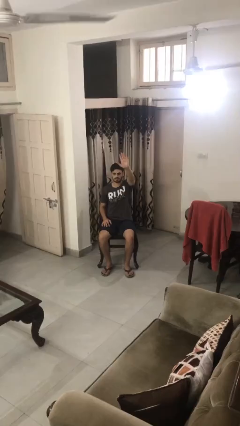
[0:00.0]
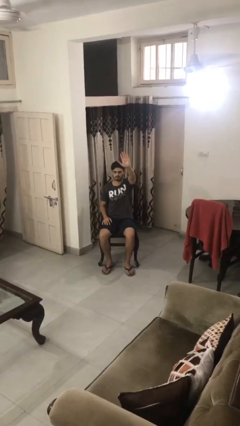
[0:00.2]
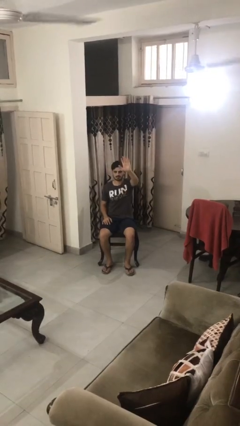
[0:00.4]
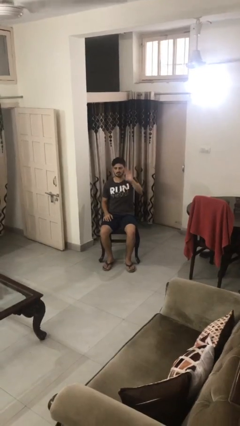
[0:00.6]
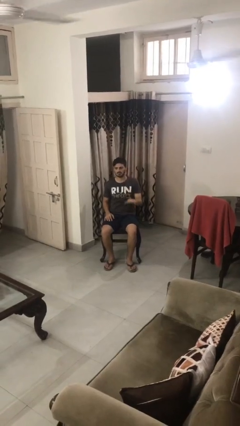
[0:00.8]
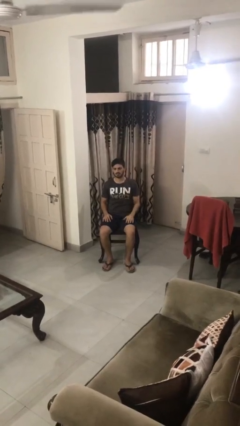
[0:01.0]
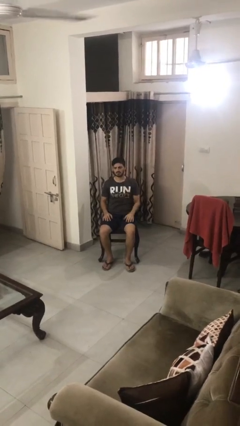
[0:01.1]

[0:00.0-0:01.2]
person gestures lower hand

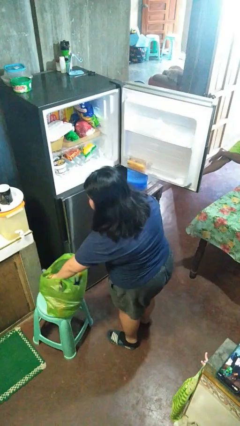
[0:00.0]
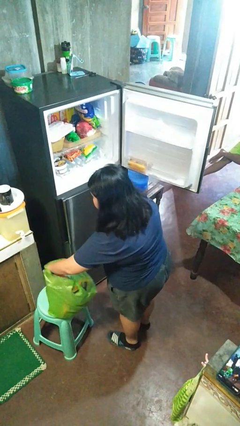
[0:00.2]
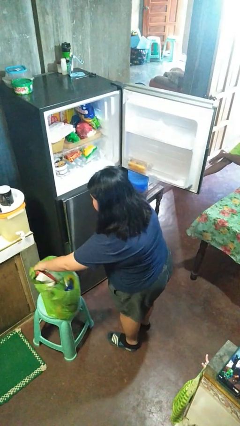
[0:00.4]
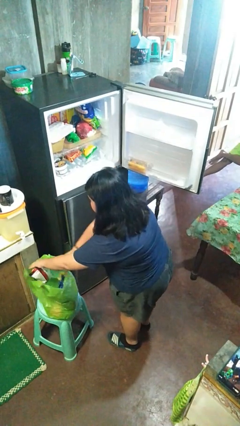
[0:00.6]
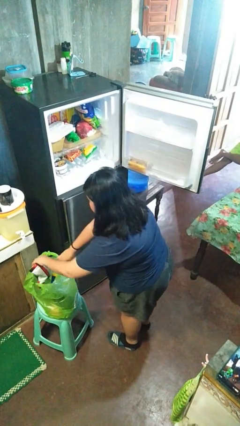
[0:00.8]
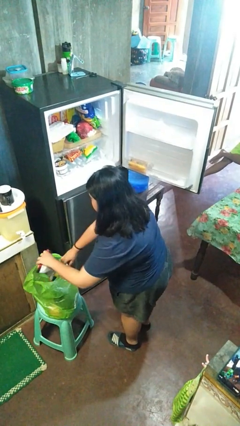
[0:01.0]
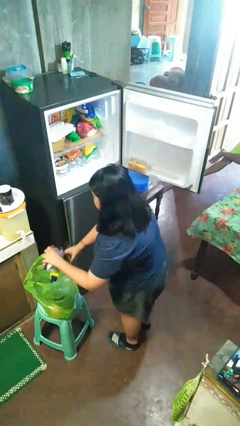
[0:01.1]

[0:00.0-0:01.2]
person loads groceries into refrigerator

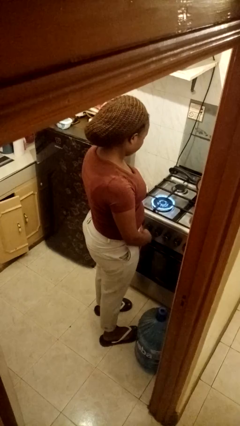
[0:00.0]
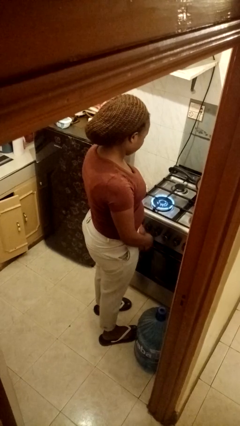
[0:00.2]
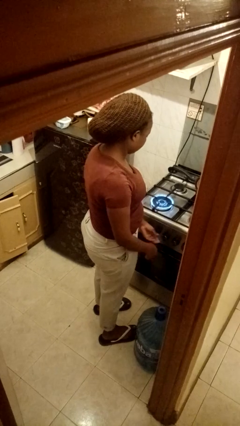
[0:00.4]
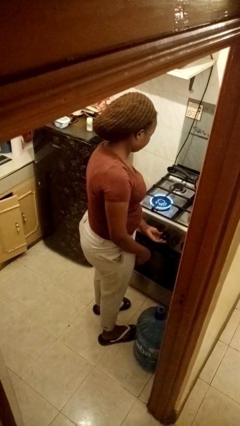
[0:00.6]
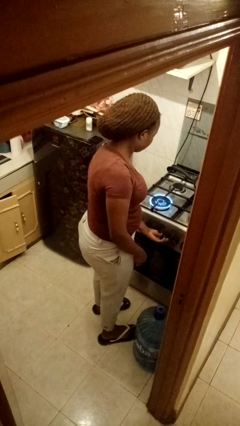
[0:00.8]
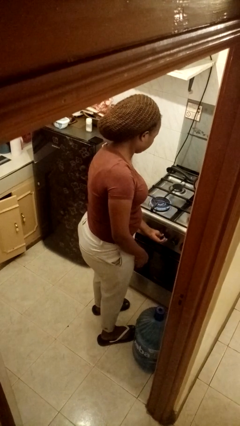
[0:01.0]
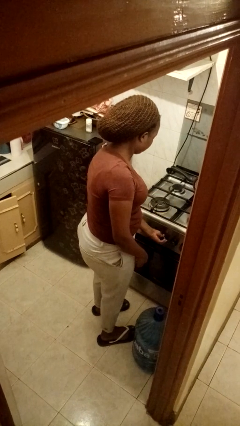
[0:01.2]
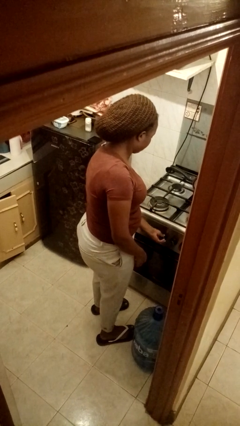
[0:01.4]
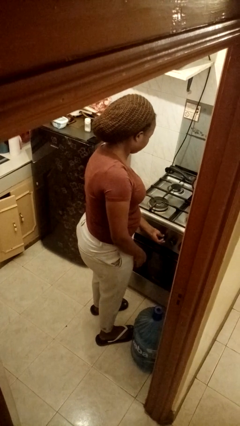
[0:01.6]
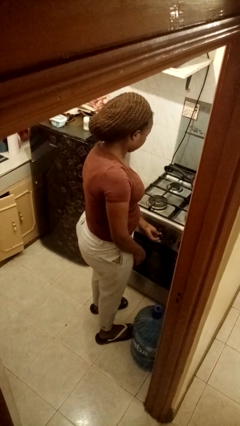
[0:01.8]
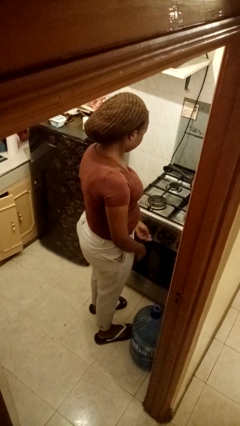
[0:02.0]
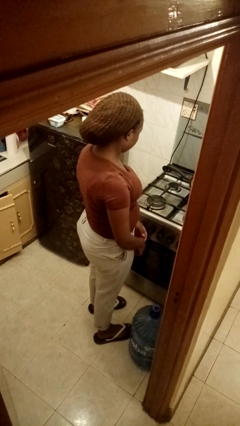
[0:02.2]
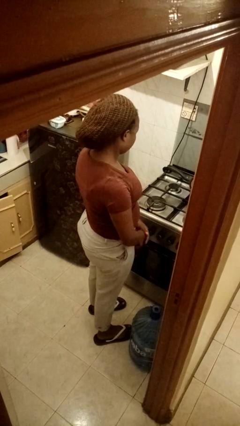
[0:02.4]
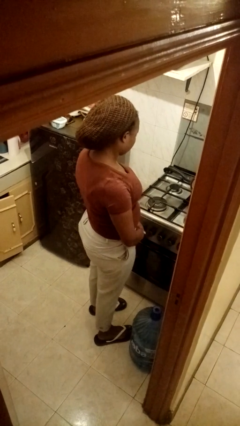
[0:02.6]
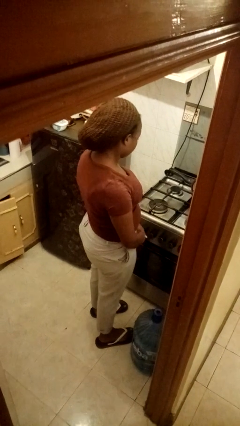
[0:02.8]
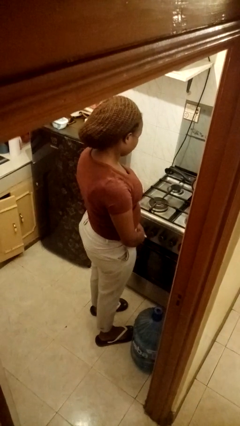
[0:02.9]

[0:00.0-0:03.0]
person turns off stovetop

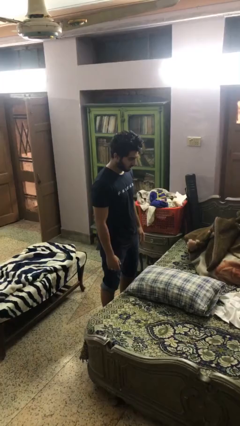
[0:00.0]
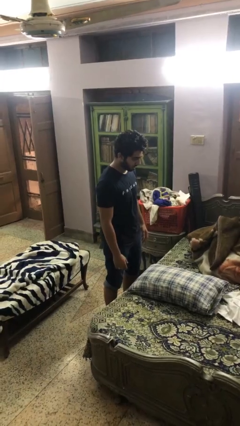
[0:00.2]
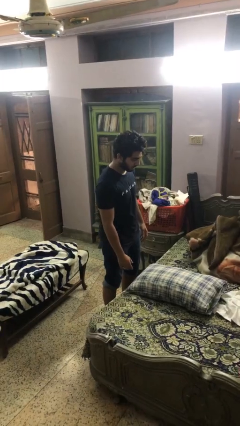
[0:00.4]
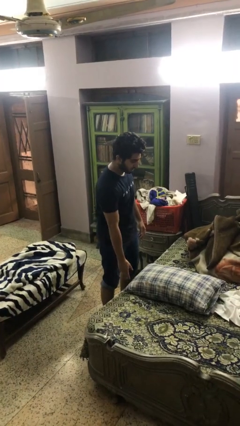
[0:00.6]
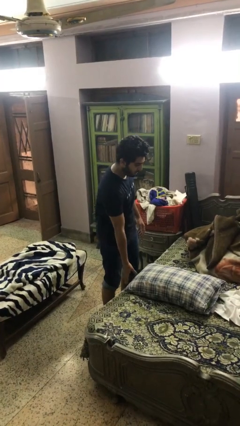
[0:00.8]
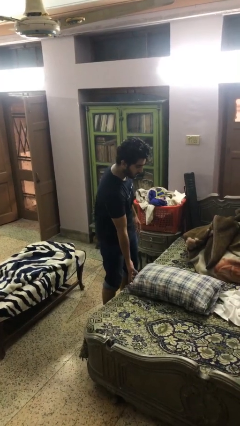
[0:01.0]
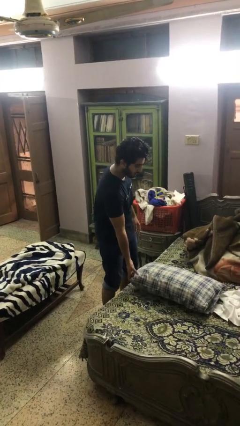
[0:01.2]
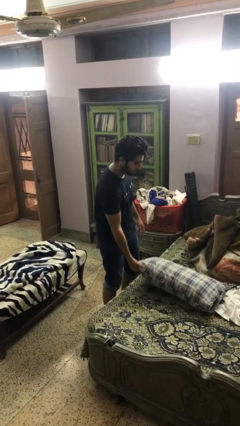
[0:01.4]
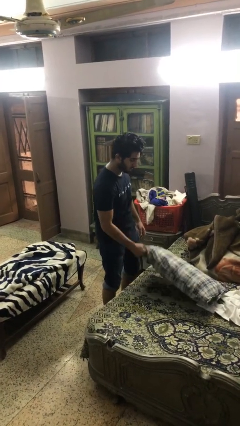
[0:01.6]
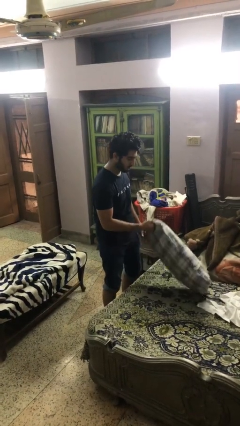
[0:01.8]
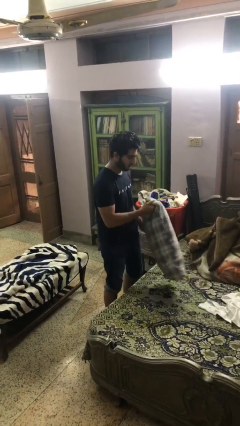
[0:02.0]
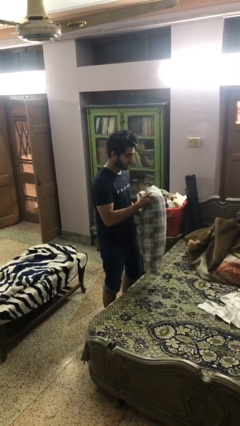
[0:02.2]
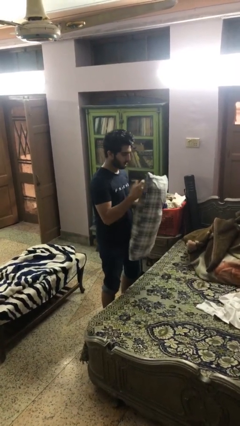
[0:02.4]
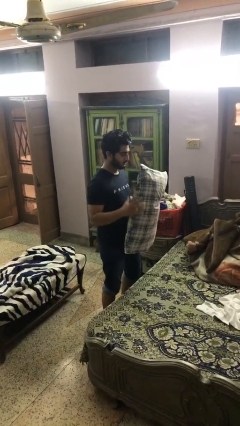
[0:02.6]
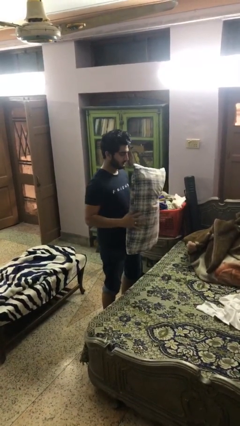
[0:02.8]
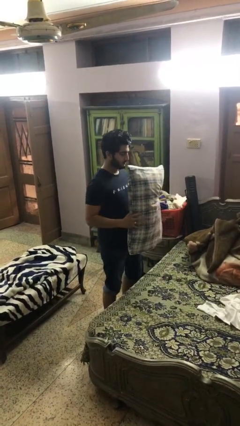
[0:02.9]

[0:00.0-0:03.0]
person picks up object from bed

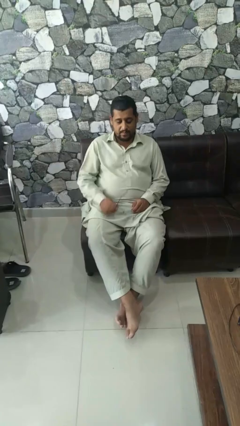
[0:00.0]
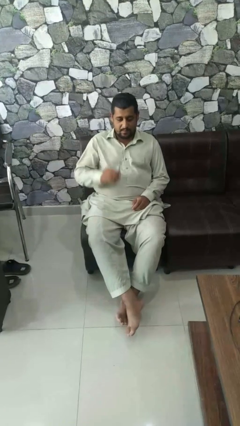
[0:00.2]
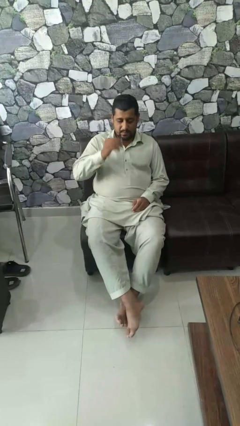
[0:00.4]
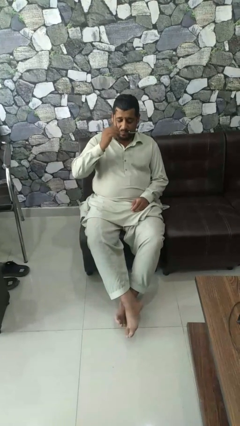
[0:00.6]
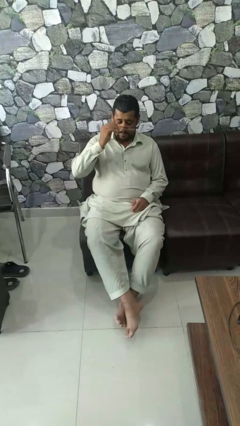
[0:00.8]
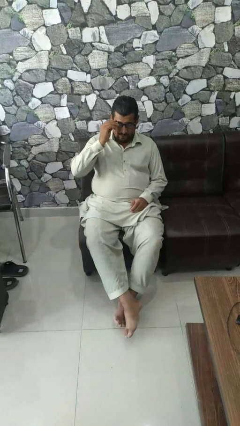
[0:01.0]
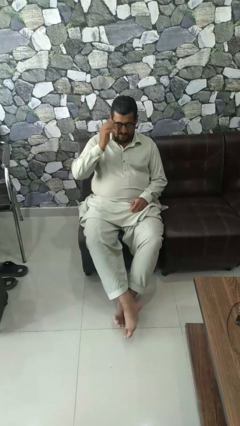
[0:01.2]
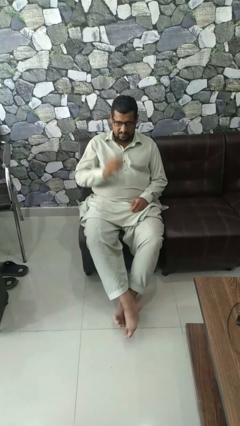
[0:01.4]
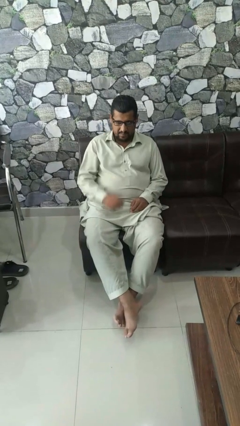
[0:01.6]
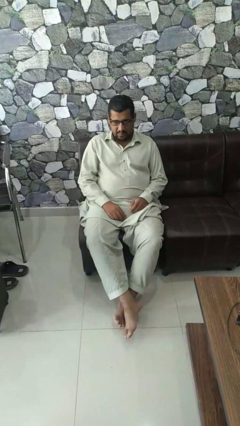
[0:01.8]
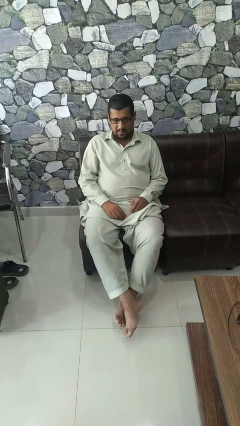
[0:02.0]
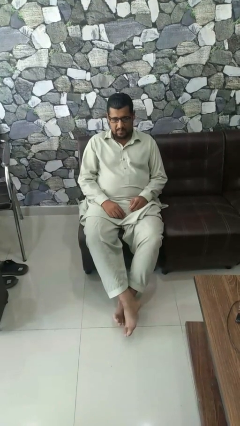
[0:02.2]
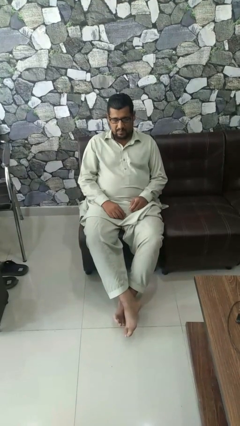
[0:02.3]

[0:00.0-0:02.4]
person puts on glasses

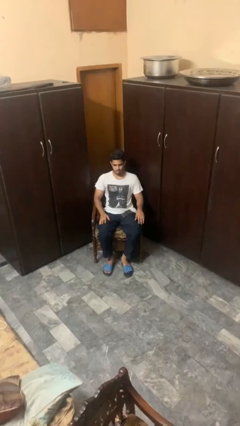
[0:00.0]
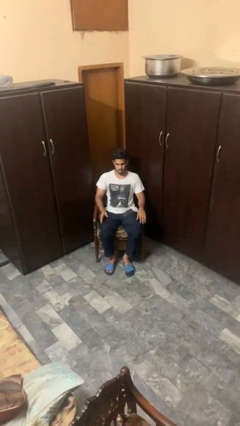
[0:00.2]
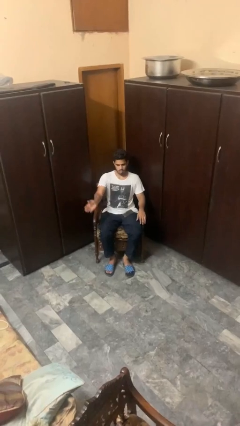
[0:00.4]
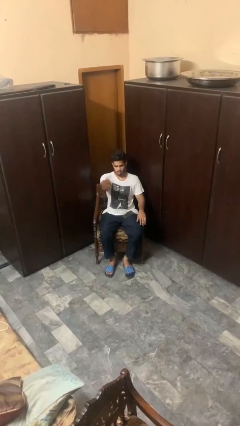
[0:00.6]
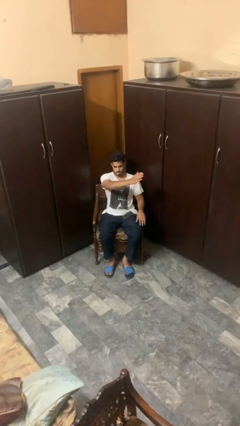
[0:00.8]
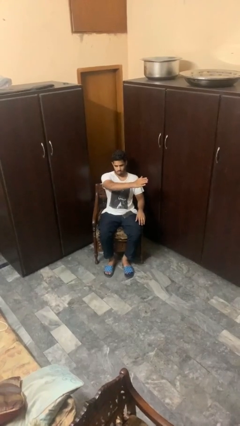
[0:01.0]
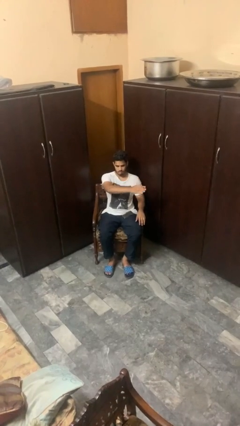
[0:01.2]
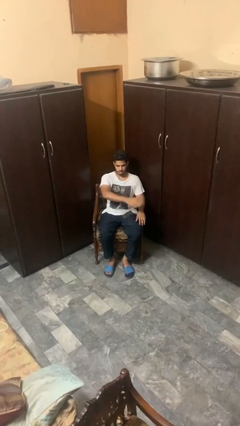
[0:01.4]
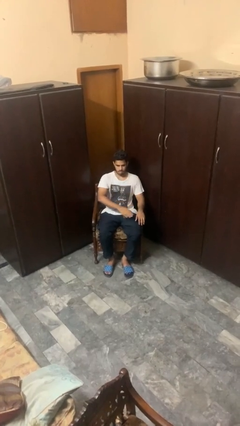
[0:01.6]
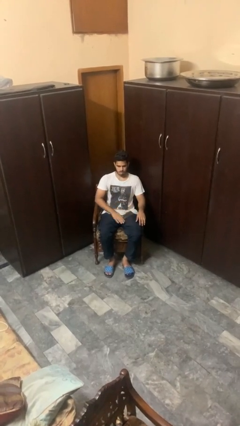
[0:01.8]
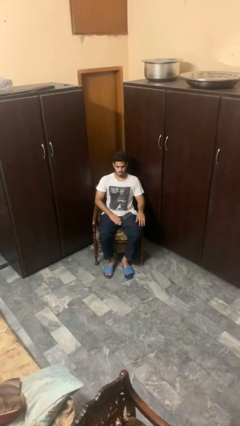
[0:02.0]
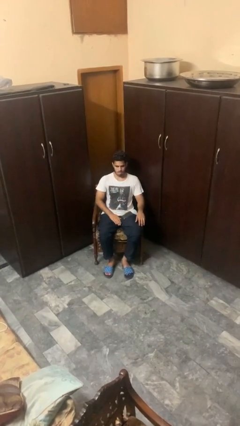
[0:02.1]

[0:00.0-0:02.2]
person gestures swipe left

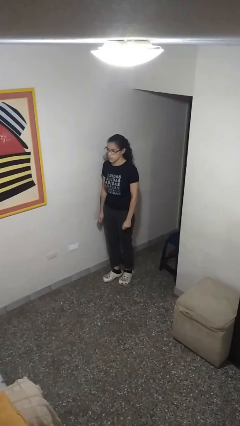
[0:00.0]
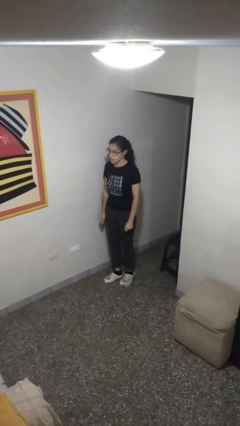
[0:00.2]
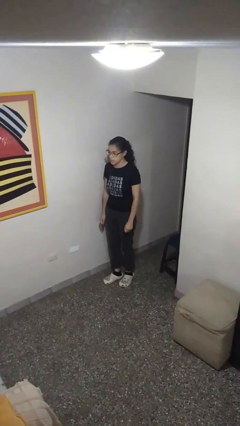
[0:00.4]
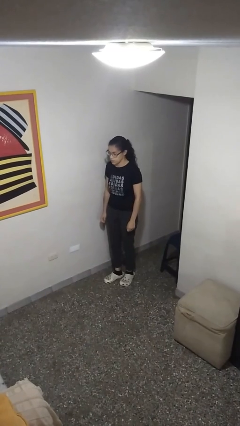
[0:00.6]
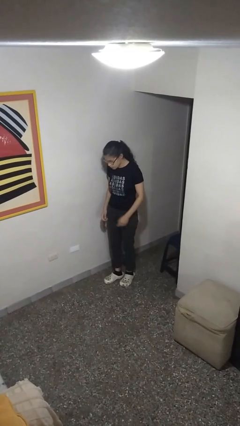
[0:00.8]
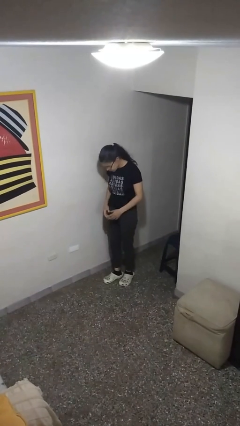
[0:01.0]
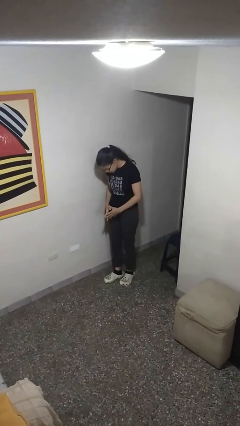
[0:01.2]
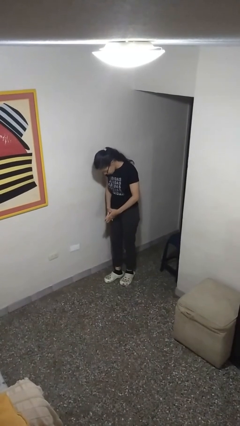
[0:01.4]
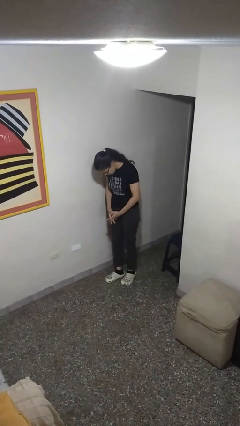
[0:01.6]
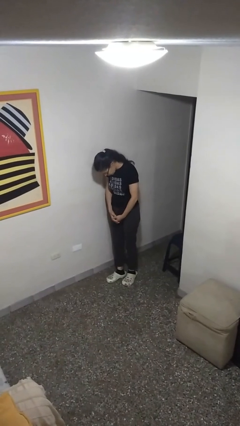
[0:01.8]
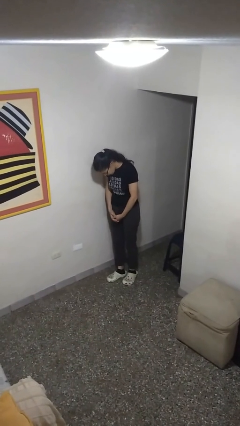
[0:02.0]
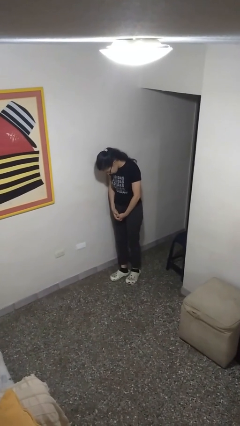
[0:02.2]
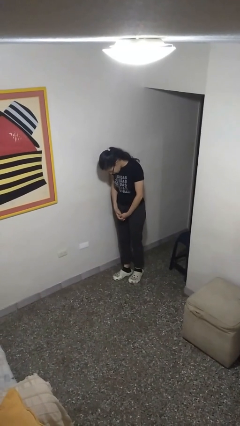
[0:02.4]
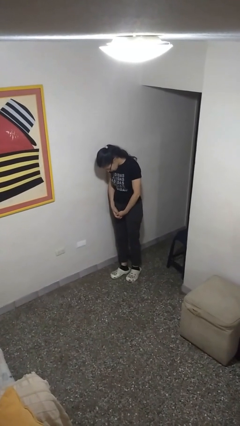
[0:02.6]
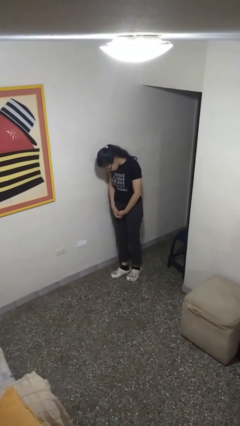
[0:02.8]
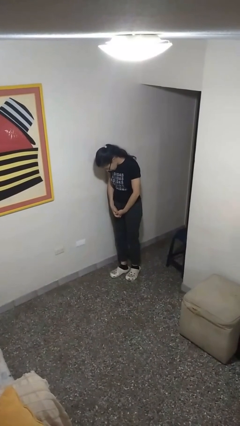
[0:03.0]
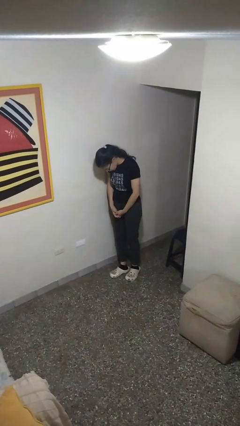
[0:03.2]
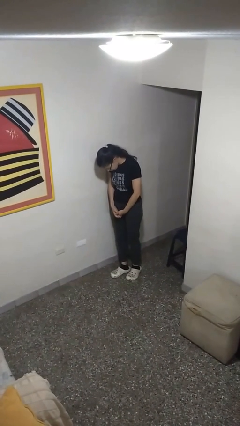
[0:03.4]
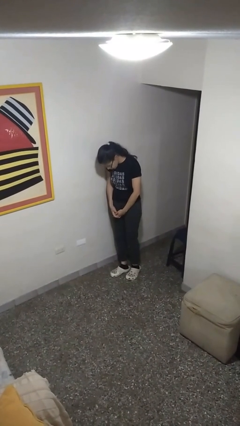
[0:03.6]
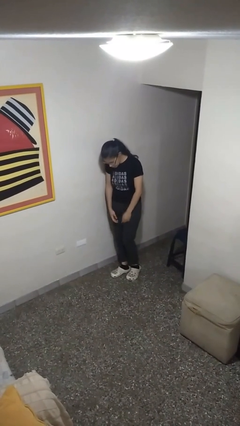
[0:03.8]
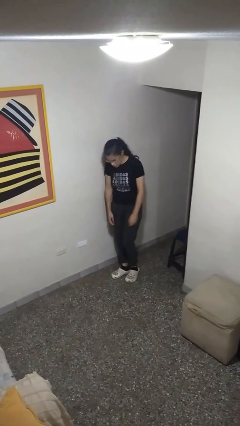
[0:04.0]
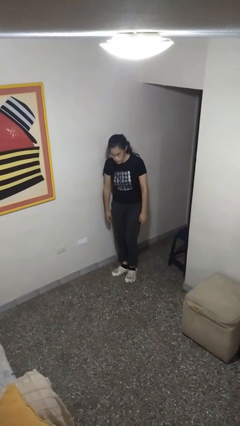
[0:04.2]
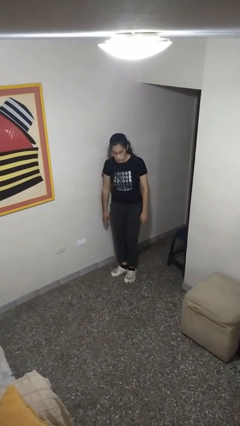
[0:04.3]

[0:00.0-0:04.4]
person prays
